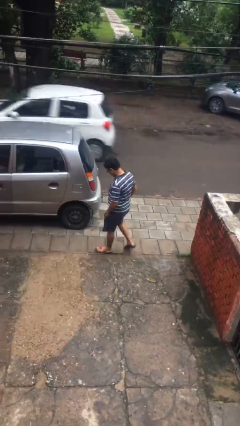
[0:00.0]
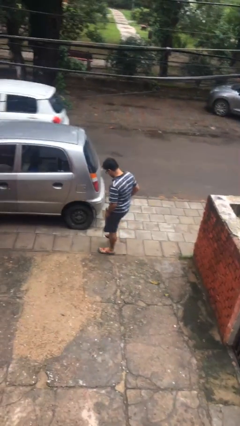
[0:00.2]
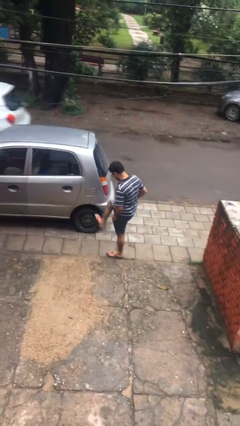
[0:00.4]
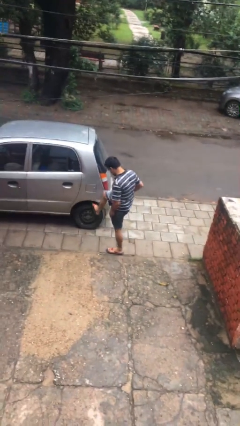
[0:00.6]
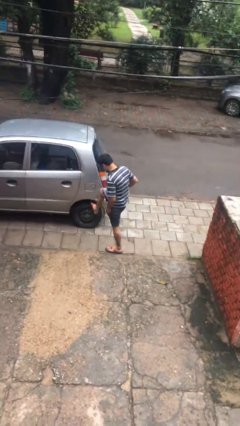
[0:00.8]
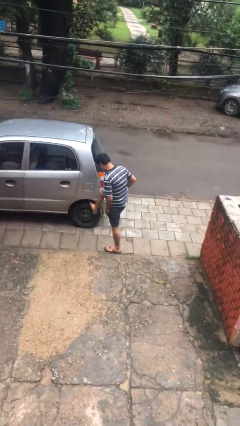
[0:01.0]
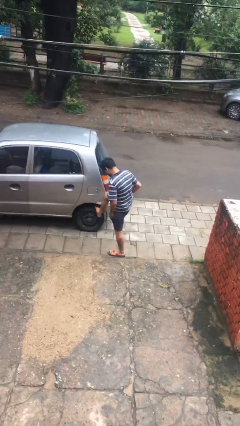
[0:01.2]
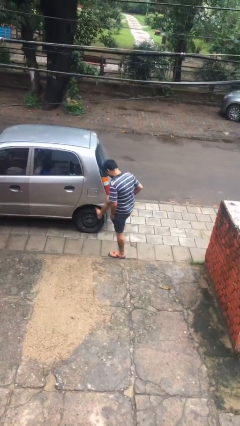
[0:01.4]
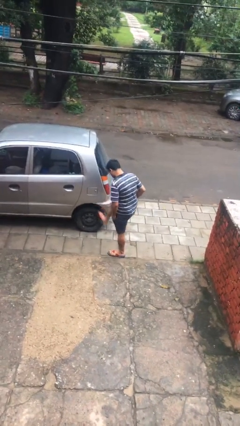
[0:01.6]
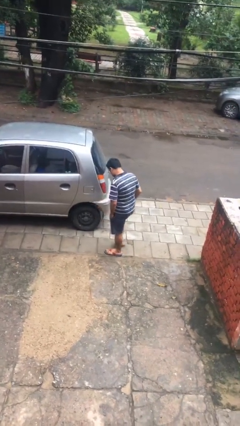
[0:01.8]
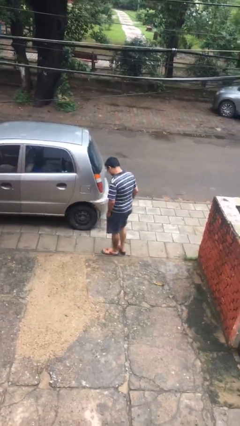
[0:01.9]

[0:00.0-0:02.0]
person kicks car tires

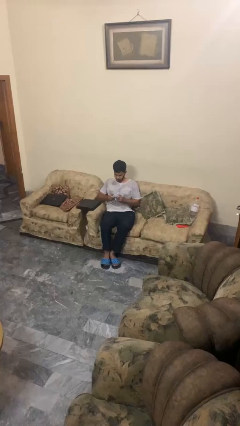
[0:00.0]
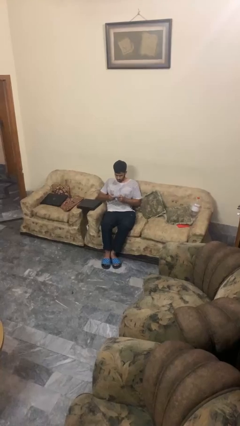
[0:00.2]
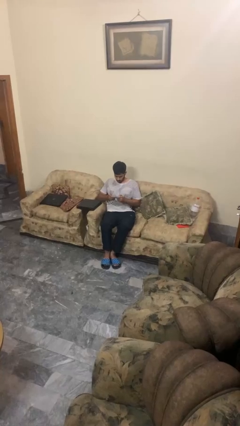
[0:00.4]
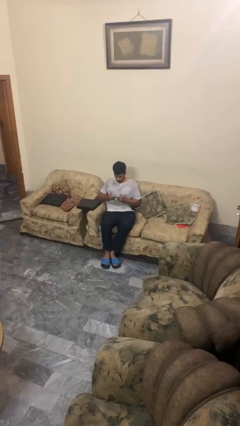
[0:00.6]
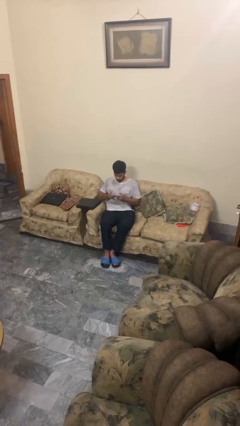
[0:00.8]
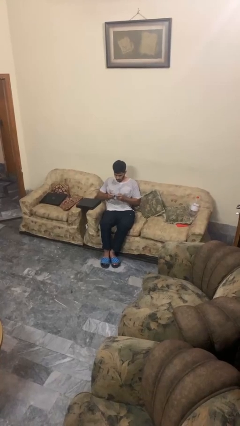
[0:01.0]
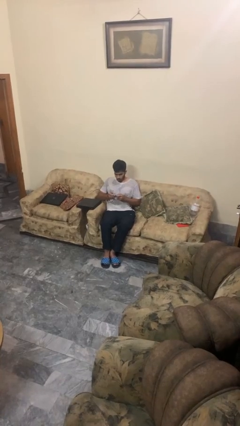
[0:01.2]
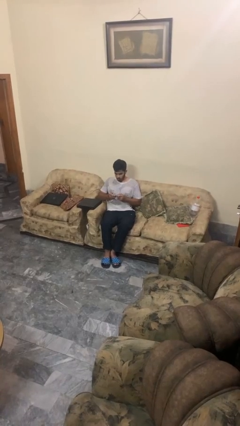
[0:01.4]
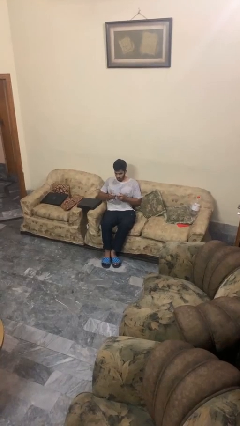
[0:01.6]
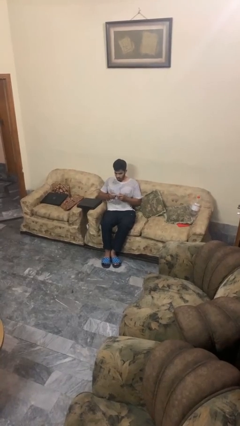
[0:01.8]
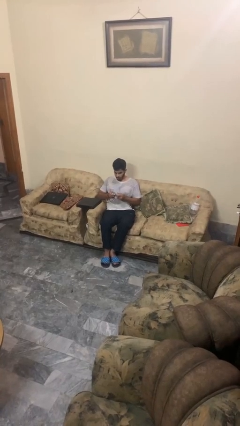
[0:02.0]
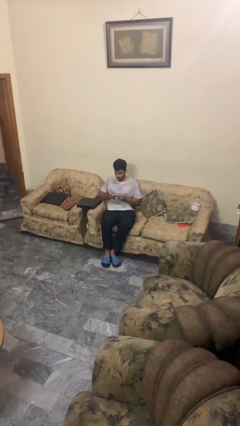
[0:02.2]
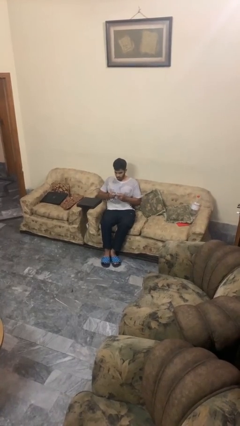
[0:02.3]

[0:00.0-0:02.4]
person interacts with handheld game

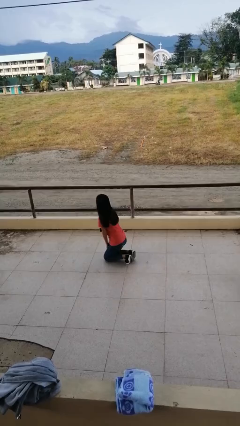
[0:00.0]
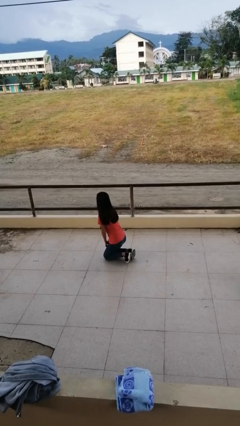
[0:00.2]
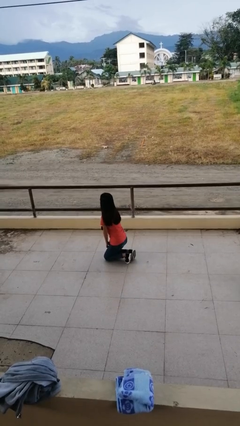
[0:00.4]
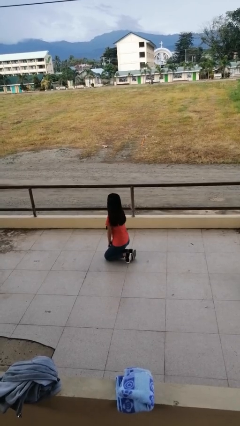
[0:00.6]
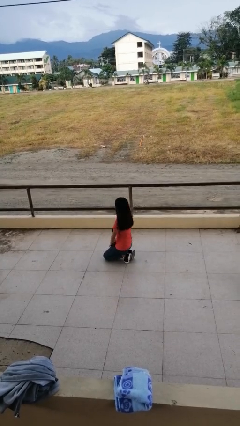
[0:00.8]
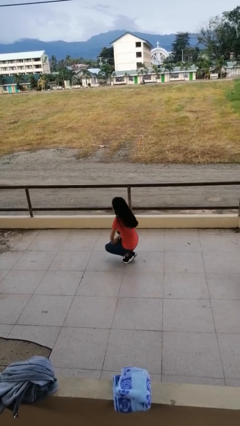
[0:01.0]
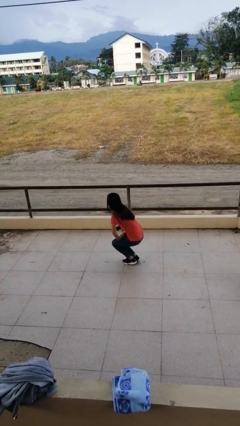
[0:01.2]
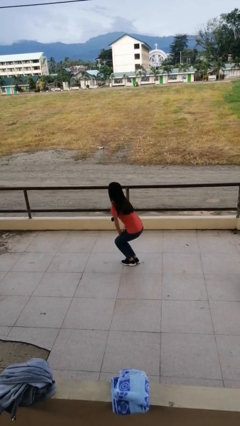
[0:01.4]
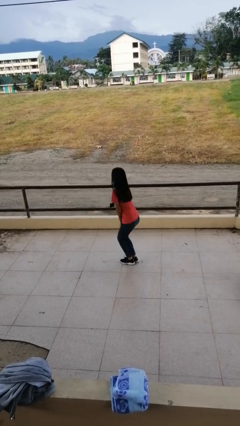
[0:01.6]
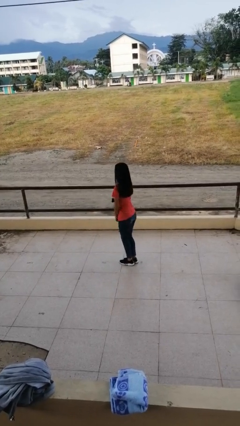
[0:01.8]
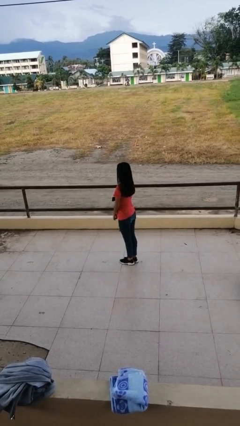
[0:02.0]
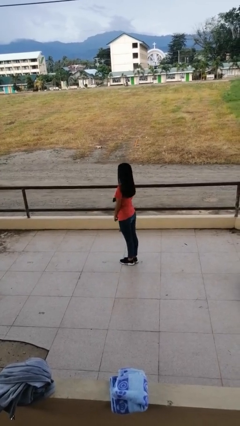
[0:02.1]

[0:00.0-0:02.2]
person stands up from floor

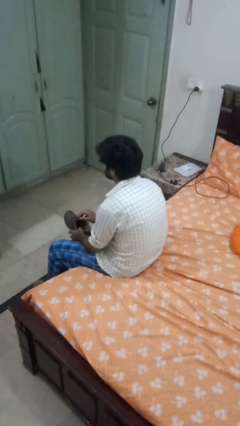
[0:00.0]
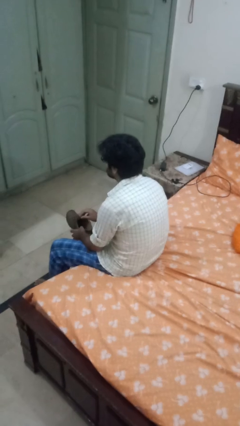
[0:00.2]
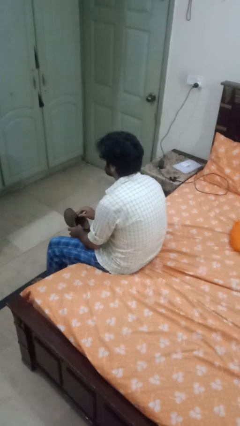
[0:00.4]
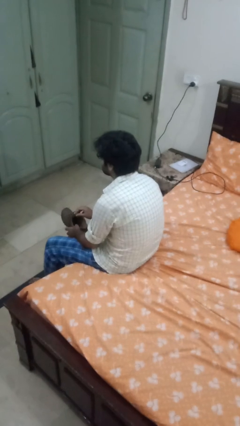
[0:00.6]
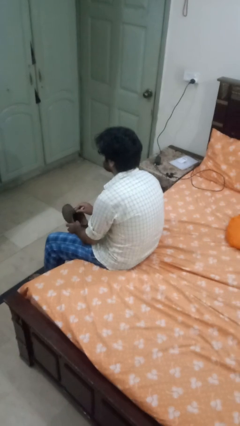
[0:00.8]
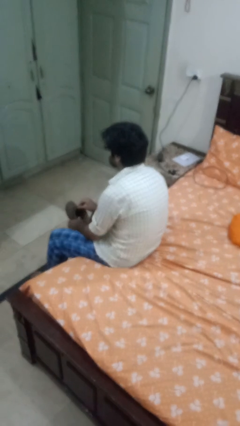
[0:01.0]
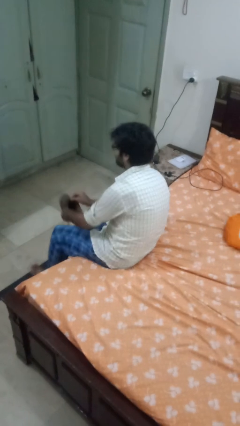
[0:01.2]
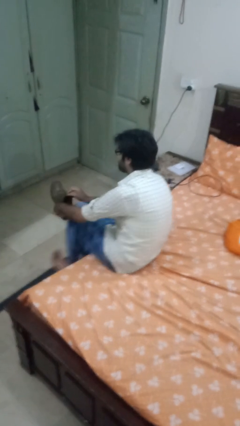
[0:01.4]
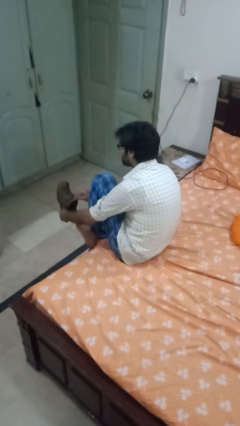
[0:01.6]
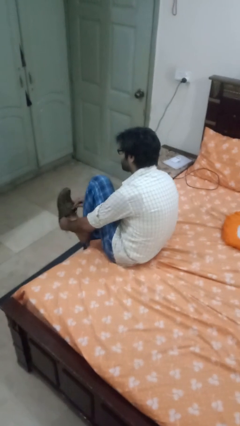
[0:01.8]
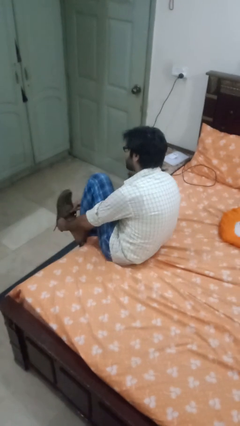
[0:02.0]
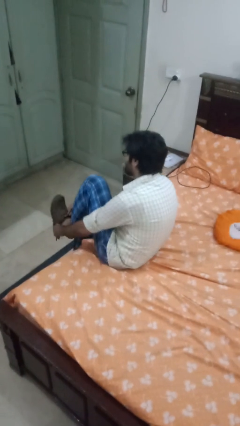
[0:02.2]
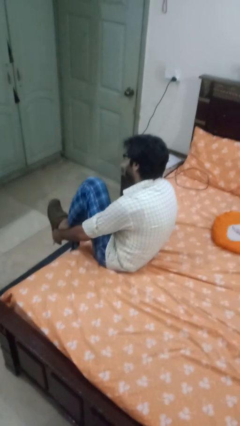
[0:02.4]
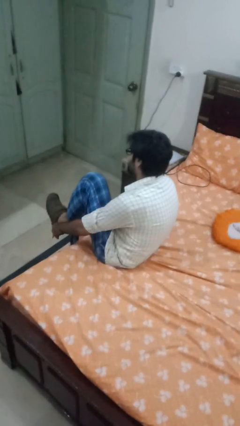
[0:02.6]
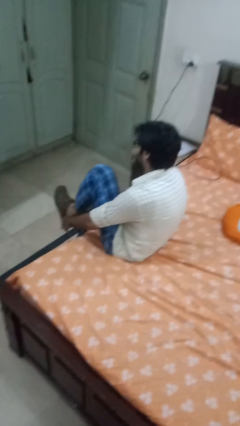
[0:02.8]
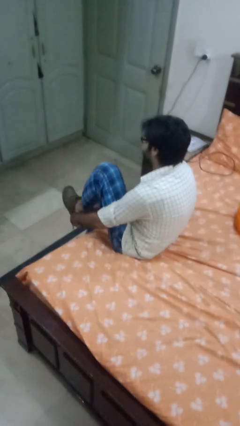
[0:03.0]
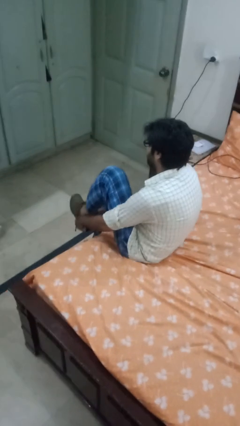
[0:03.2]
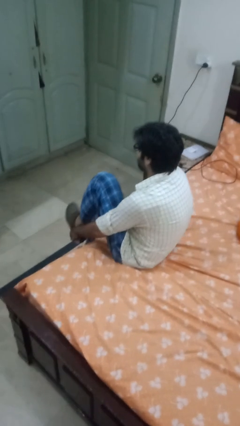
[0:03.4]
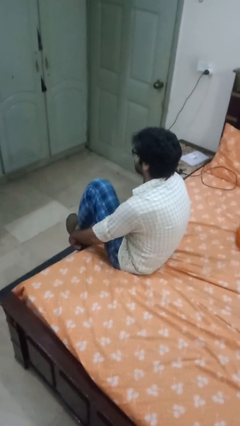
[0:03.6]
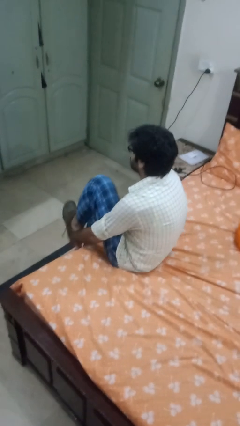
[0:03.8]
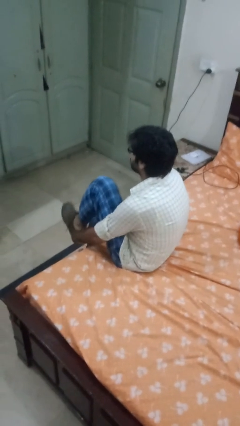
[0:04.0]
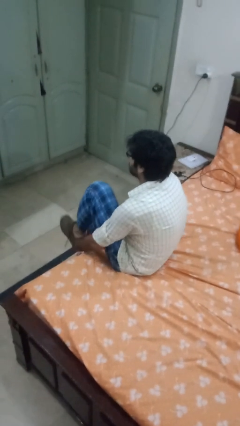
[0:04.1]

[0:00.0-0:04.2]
person puts on shoes

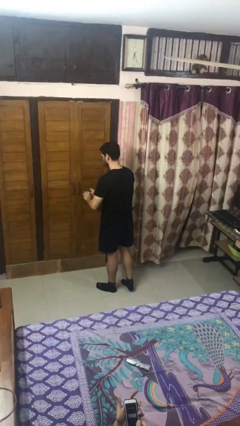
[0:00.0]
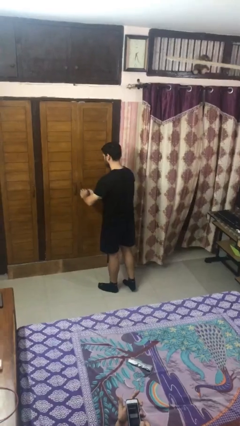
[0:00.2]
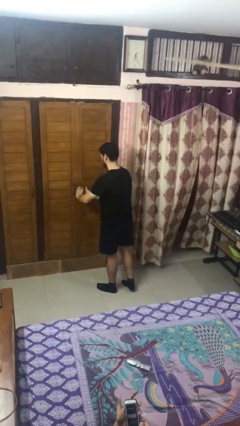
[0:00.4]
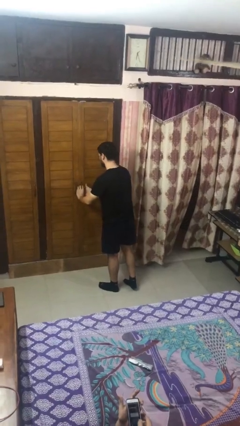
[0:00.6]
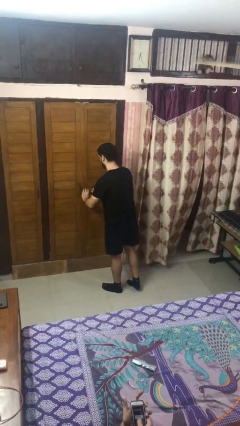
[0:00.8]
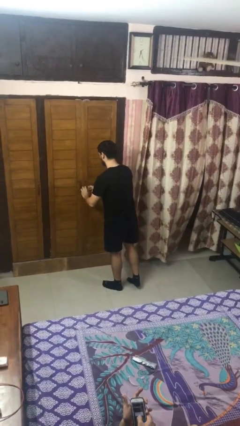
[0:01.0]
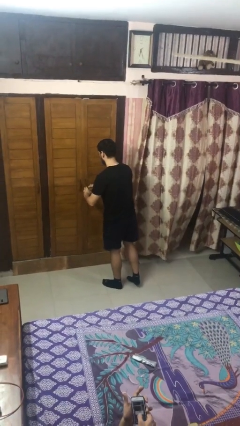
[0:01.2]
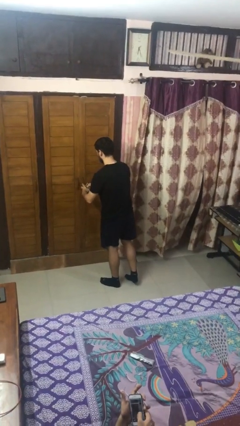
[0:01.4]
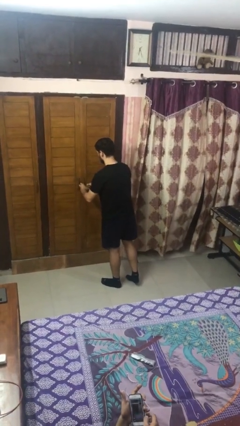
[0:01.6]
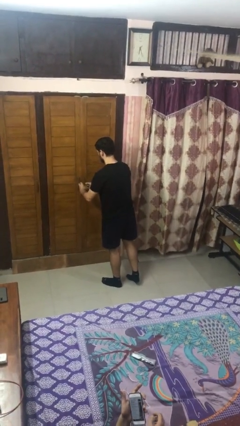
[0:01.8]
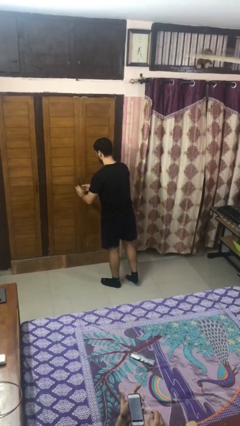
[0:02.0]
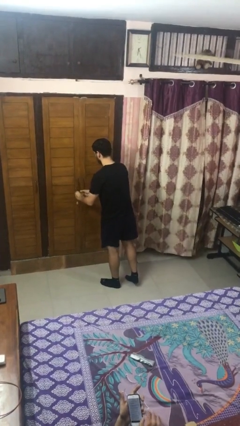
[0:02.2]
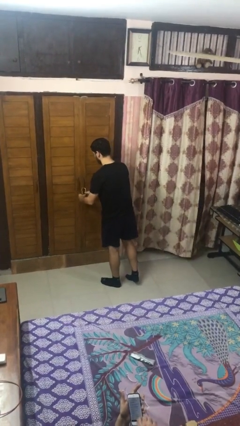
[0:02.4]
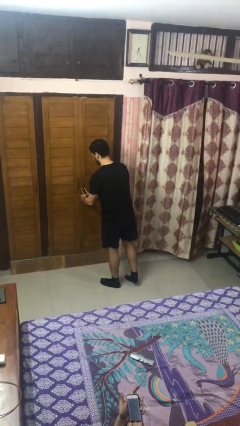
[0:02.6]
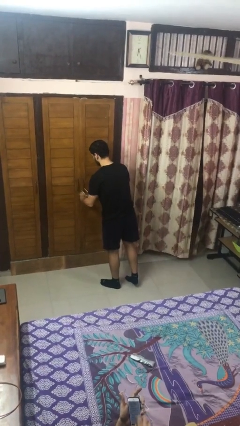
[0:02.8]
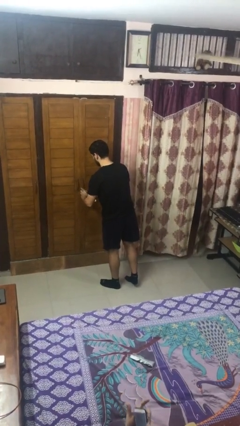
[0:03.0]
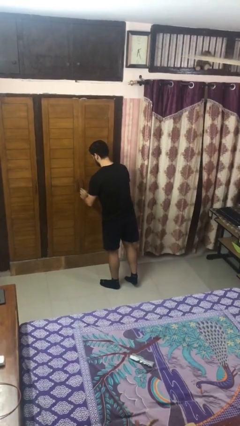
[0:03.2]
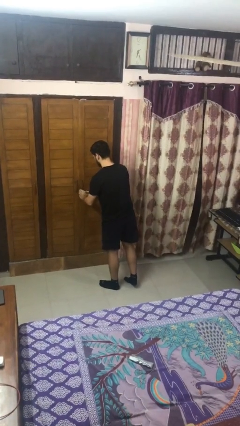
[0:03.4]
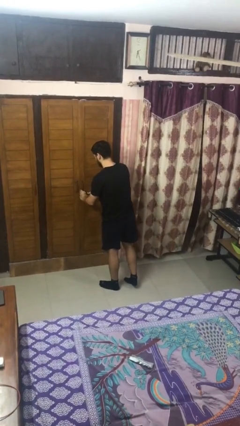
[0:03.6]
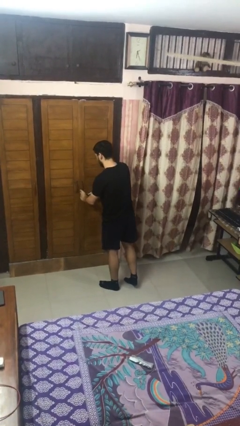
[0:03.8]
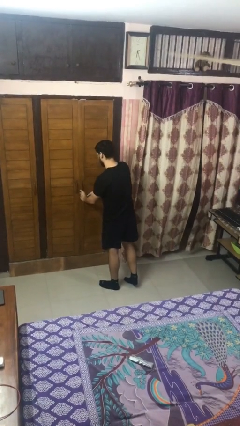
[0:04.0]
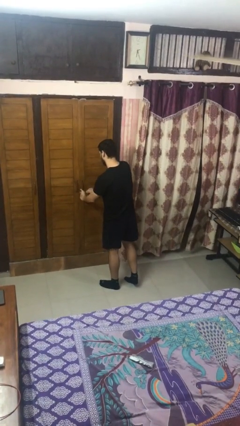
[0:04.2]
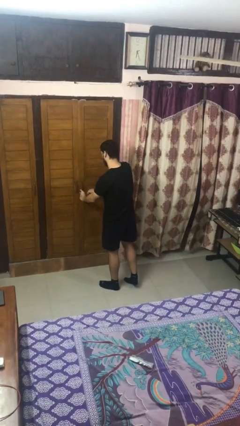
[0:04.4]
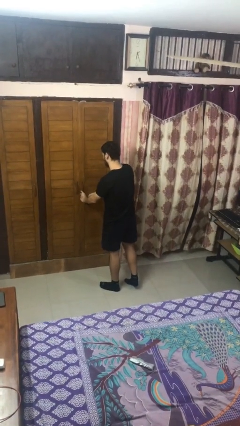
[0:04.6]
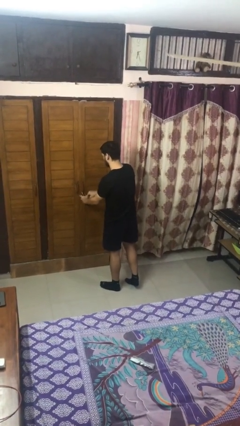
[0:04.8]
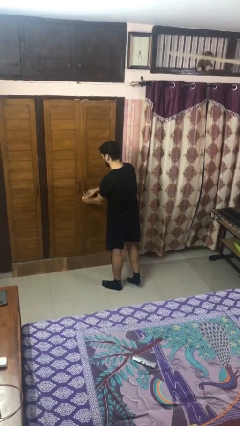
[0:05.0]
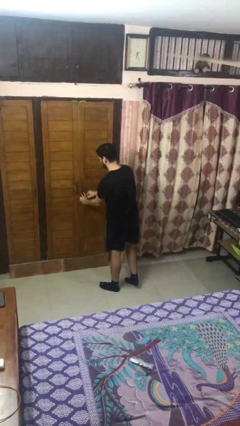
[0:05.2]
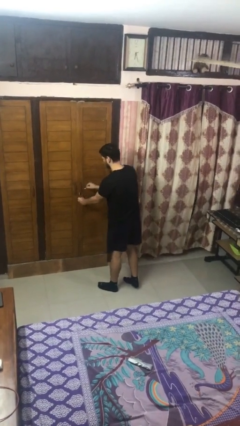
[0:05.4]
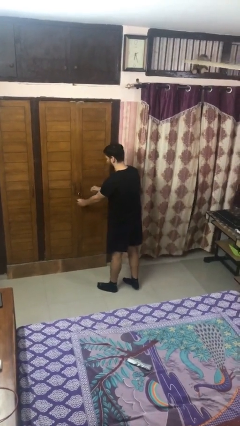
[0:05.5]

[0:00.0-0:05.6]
person locks door with keys

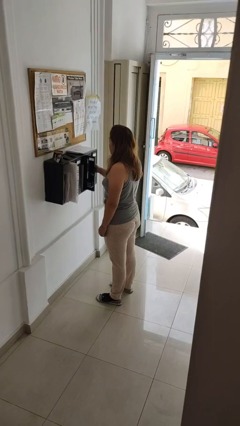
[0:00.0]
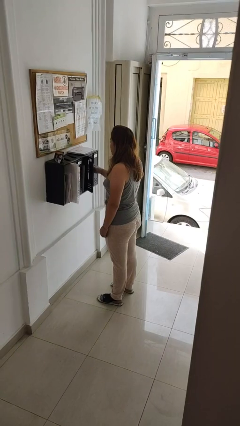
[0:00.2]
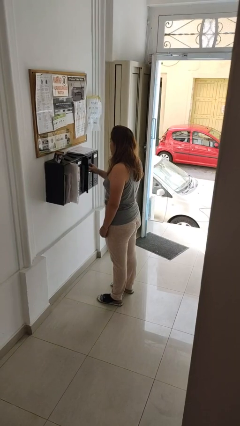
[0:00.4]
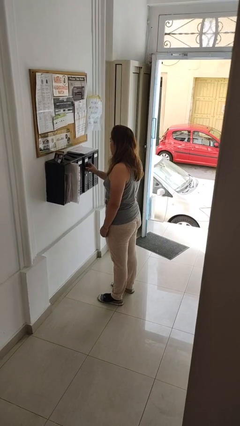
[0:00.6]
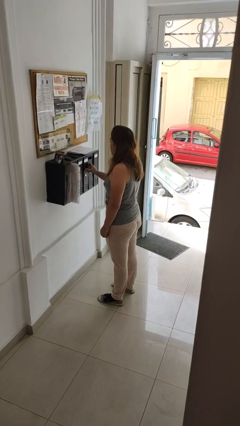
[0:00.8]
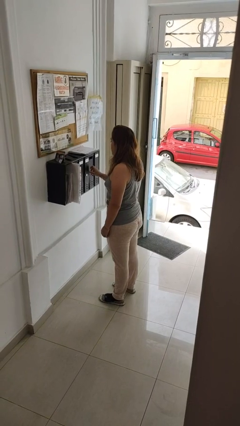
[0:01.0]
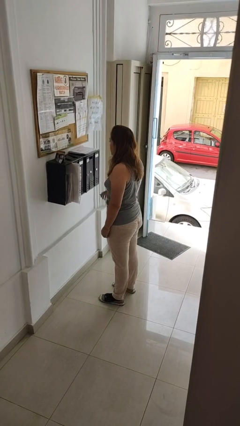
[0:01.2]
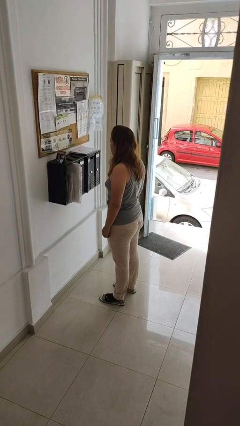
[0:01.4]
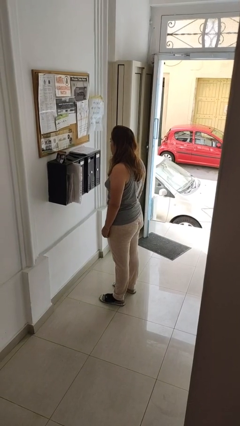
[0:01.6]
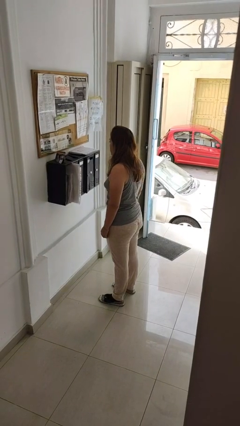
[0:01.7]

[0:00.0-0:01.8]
person closes mailbox
